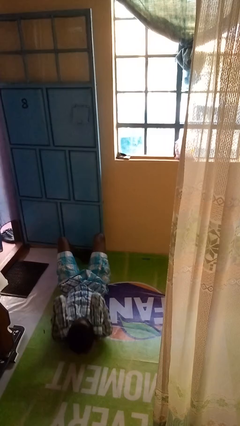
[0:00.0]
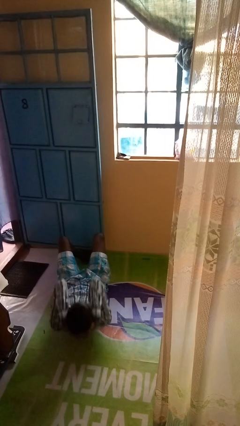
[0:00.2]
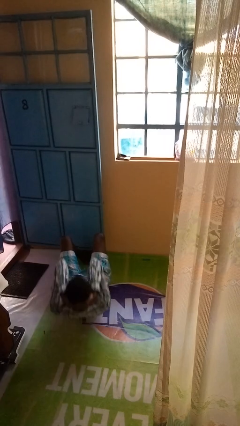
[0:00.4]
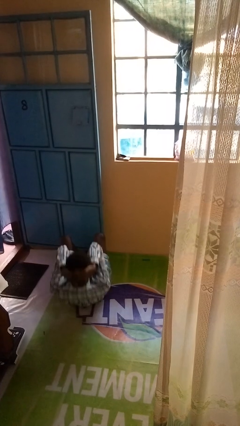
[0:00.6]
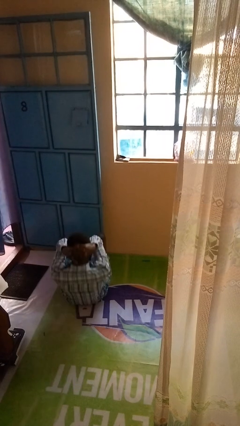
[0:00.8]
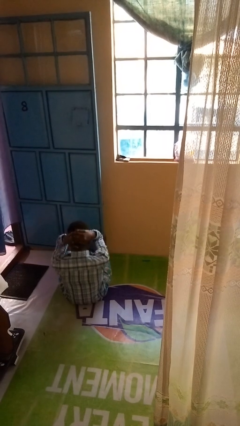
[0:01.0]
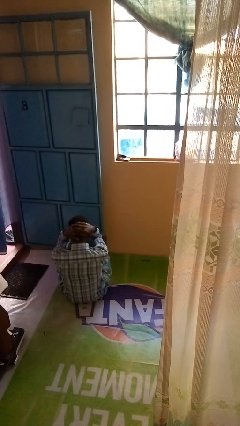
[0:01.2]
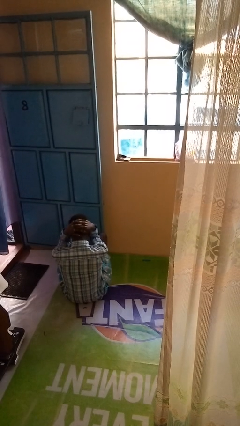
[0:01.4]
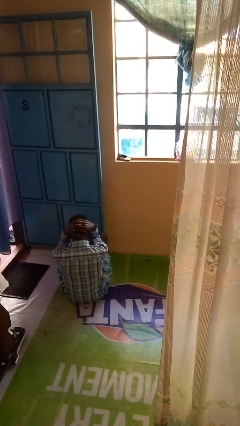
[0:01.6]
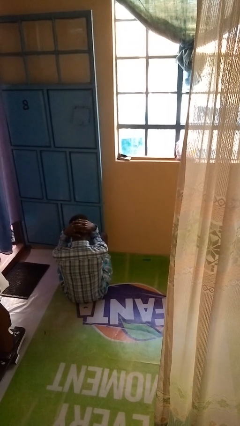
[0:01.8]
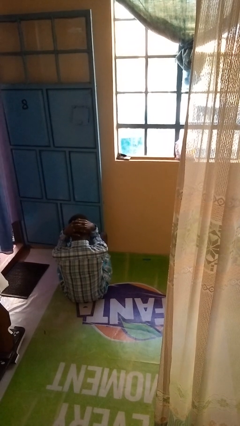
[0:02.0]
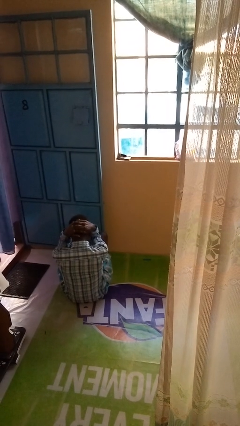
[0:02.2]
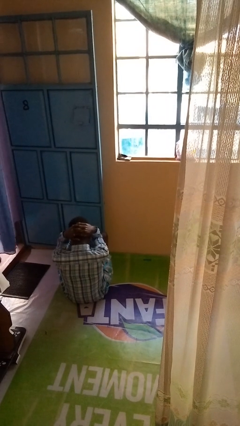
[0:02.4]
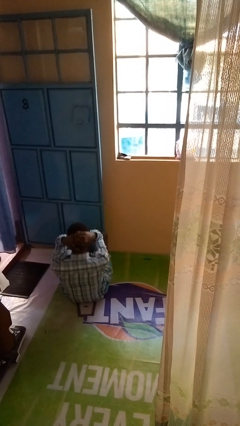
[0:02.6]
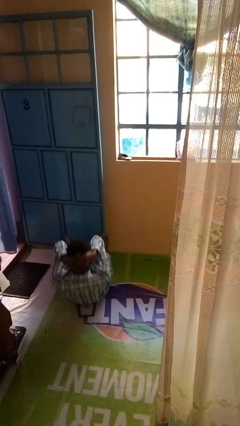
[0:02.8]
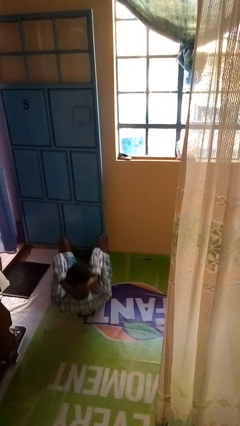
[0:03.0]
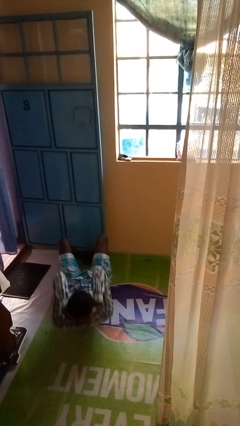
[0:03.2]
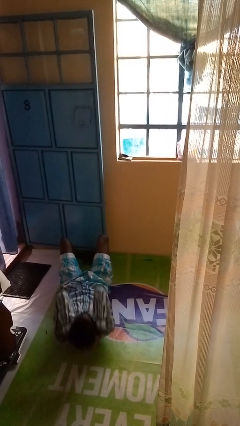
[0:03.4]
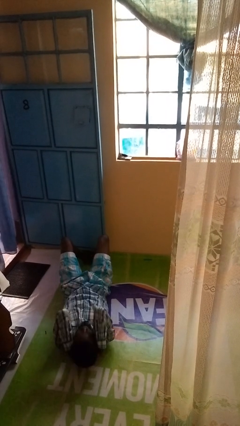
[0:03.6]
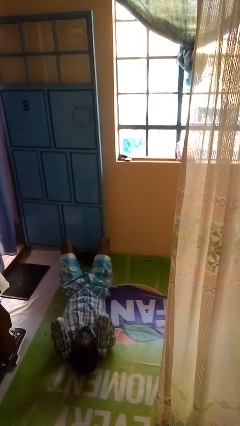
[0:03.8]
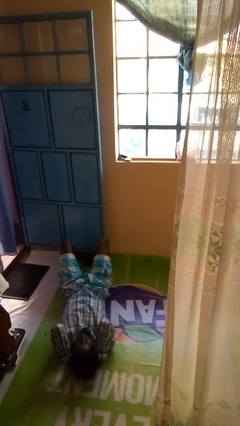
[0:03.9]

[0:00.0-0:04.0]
person exercises with situp

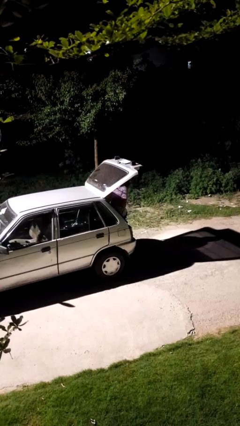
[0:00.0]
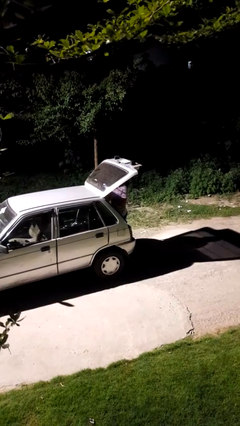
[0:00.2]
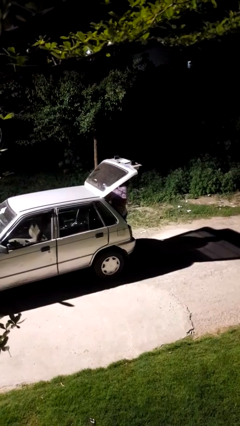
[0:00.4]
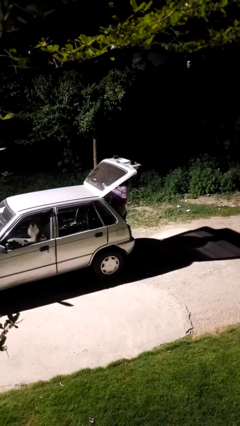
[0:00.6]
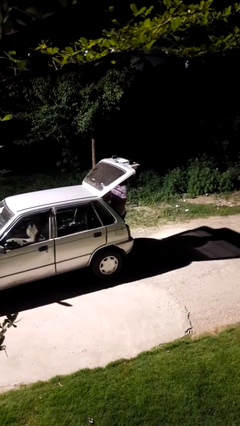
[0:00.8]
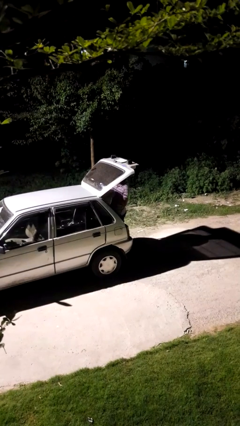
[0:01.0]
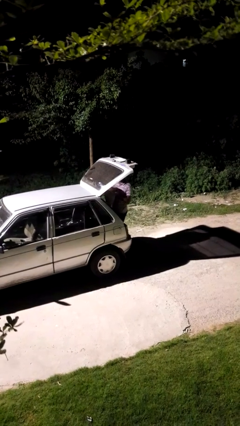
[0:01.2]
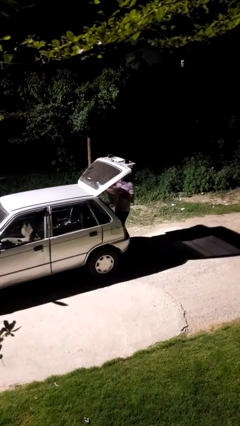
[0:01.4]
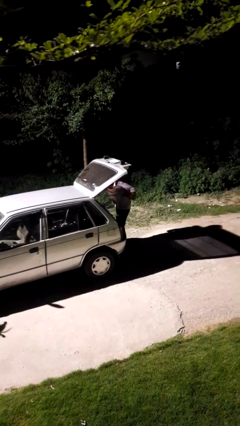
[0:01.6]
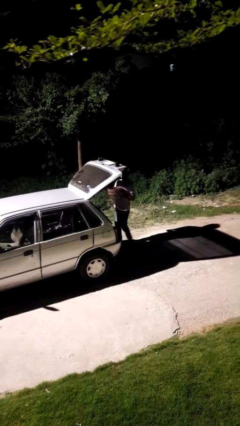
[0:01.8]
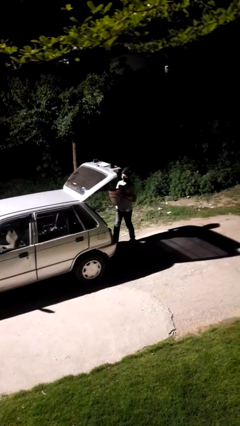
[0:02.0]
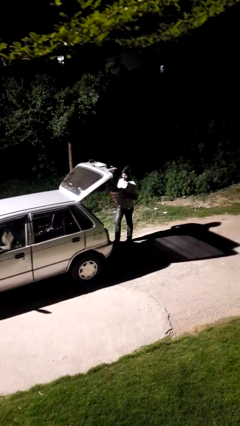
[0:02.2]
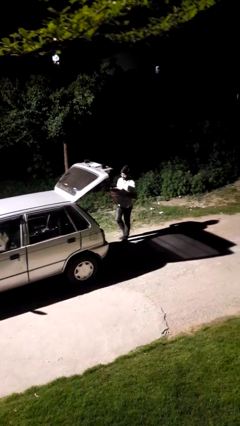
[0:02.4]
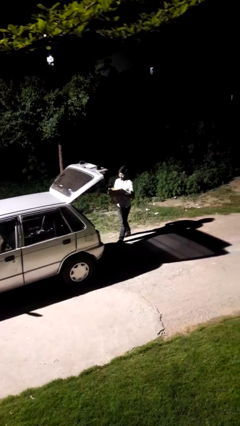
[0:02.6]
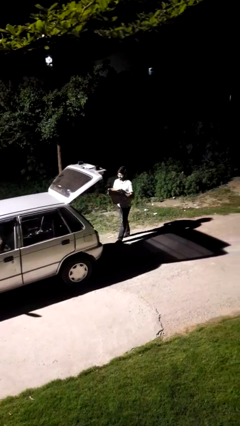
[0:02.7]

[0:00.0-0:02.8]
person unloads car

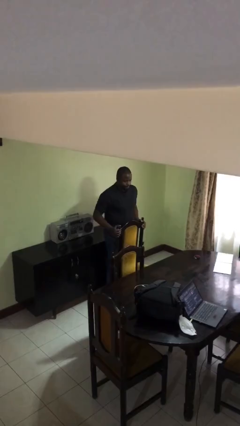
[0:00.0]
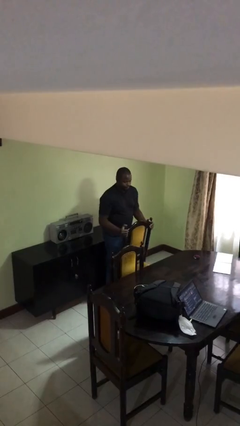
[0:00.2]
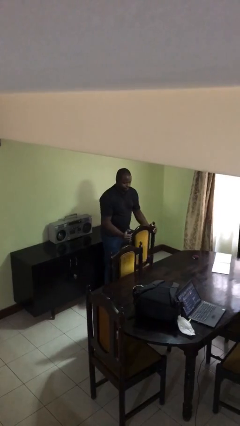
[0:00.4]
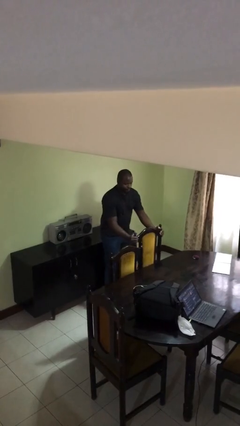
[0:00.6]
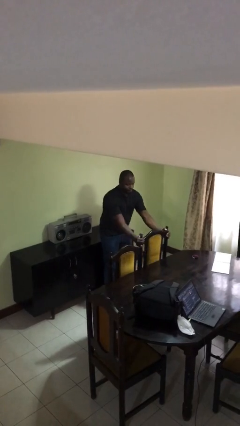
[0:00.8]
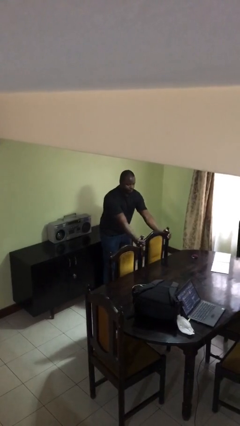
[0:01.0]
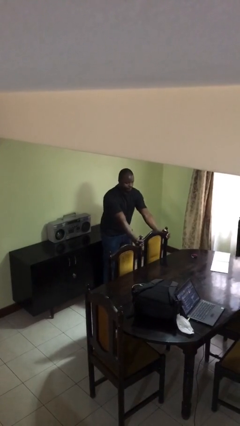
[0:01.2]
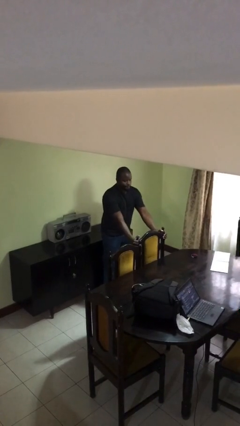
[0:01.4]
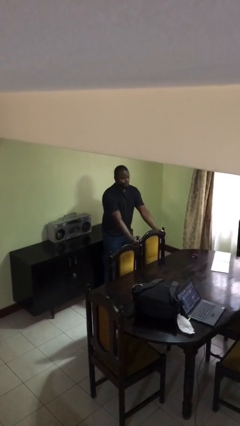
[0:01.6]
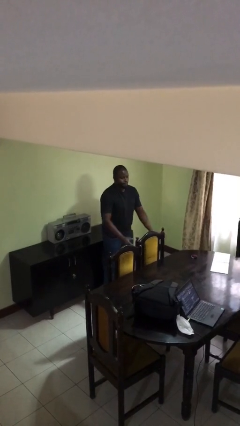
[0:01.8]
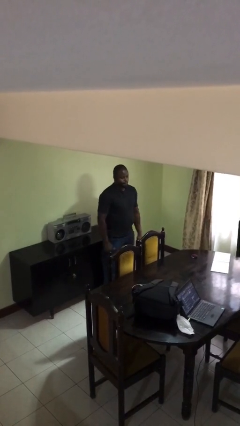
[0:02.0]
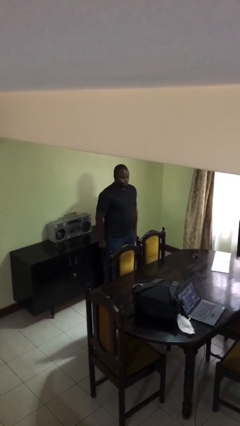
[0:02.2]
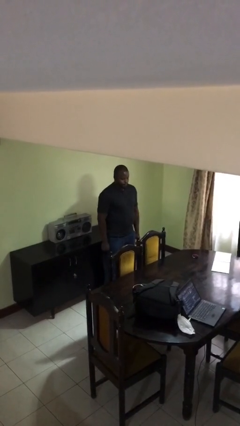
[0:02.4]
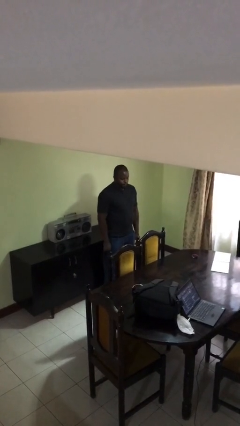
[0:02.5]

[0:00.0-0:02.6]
person pushes in chair

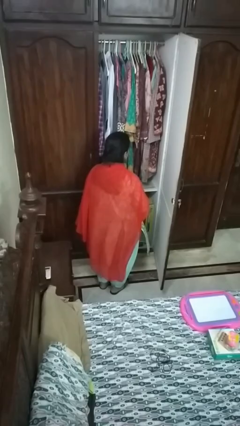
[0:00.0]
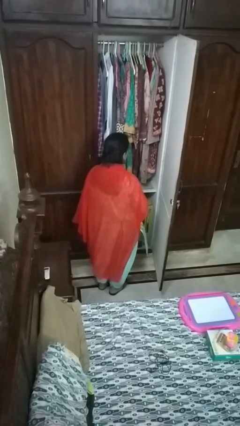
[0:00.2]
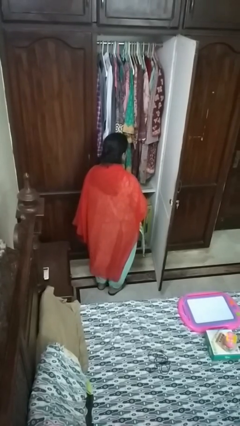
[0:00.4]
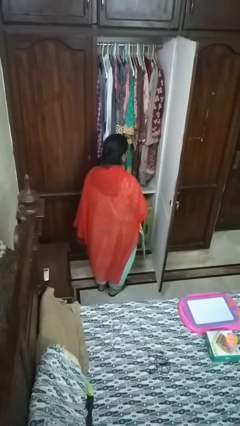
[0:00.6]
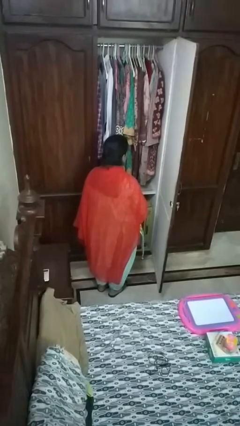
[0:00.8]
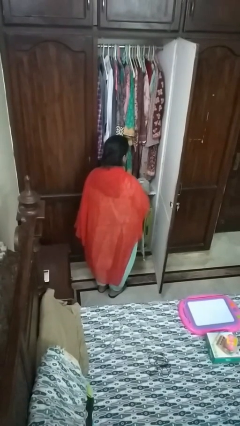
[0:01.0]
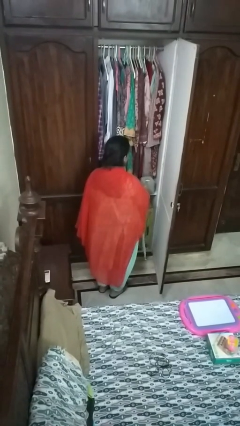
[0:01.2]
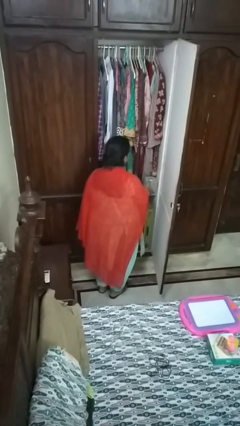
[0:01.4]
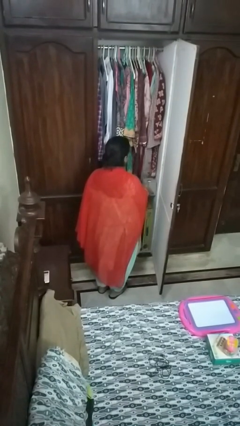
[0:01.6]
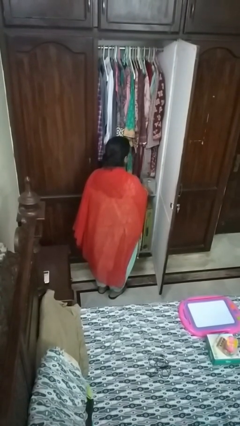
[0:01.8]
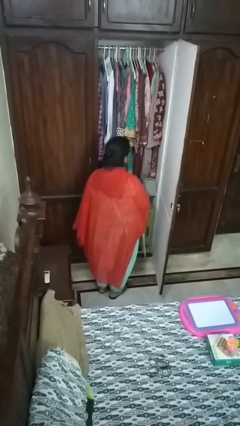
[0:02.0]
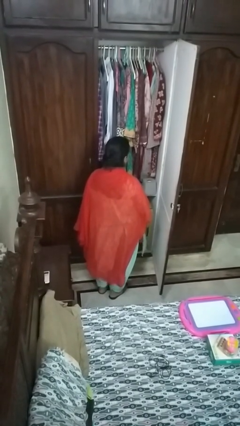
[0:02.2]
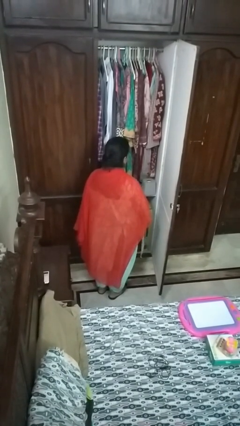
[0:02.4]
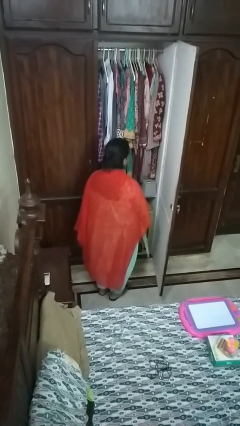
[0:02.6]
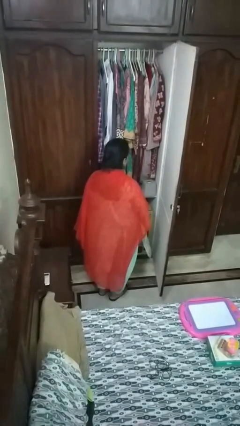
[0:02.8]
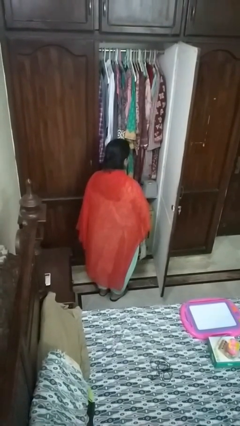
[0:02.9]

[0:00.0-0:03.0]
person puts down object into cabinet

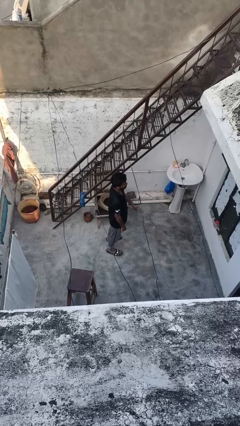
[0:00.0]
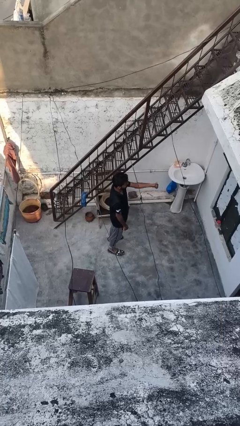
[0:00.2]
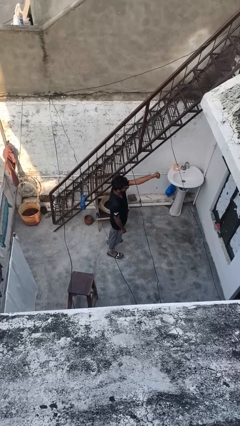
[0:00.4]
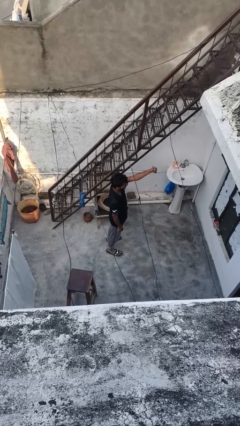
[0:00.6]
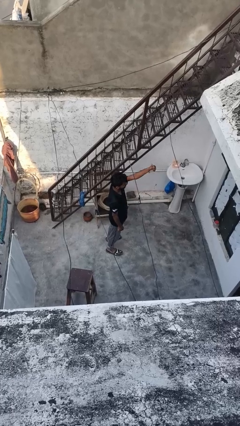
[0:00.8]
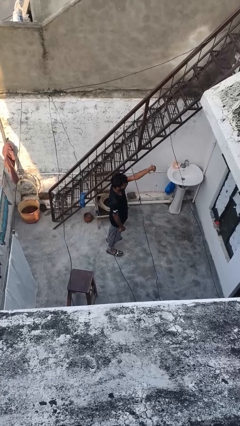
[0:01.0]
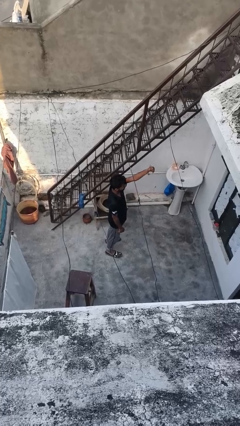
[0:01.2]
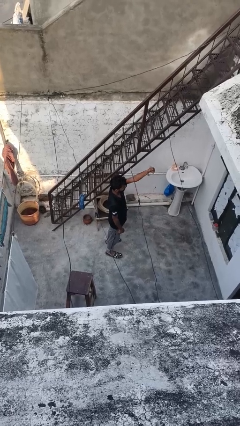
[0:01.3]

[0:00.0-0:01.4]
person gestures thumbs up

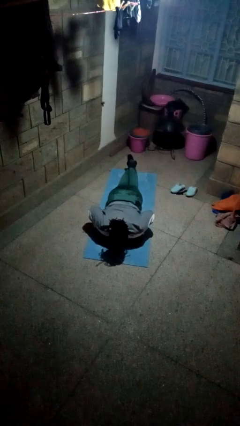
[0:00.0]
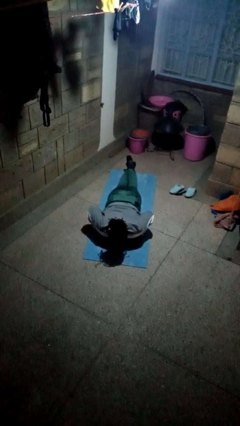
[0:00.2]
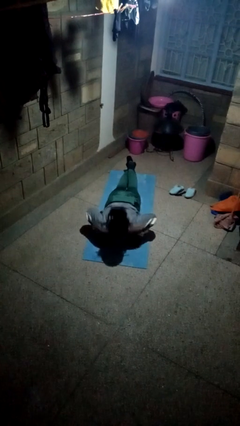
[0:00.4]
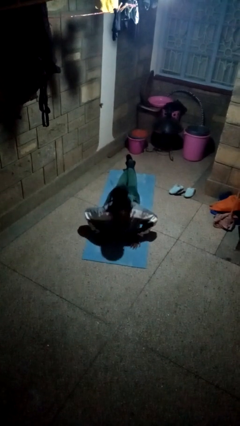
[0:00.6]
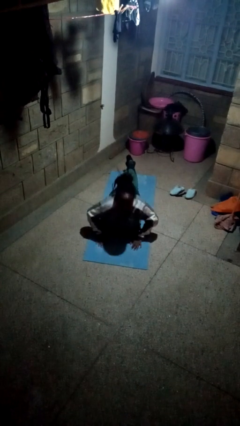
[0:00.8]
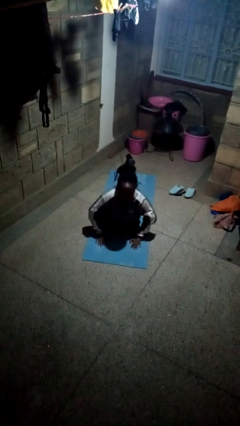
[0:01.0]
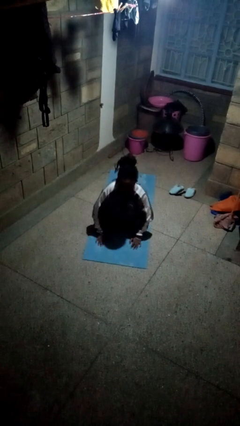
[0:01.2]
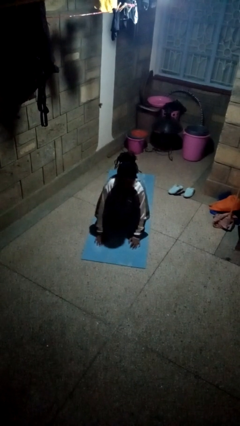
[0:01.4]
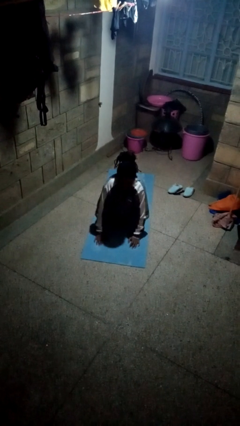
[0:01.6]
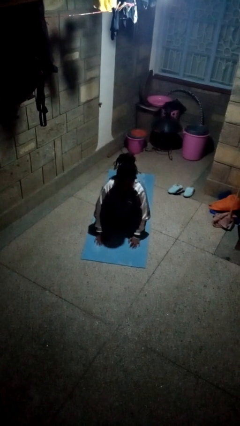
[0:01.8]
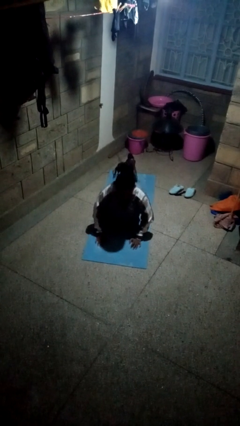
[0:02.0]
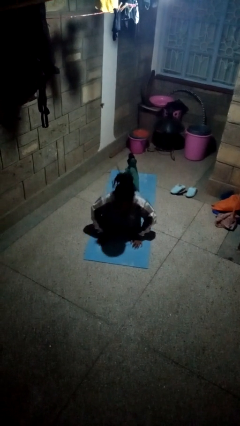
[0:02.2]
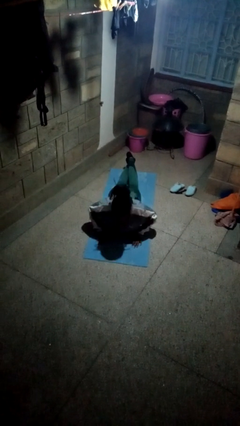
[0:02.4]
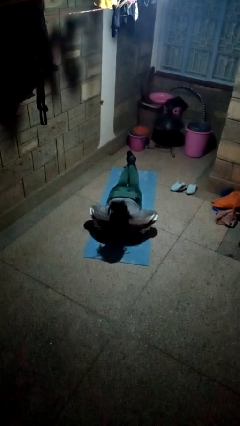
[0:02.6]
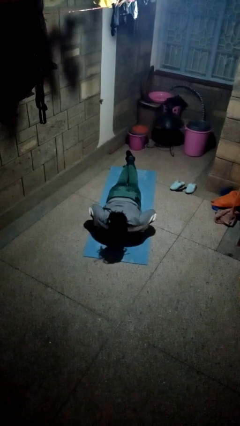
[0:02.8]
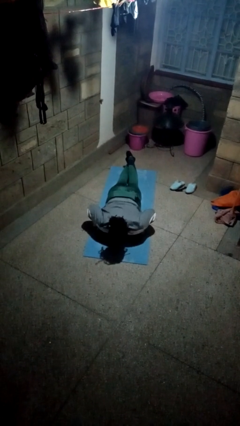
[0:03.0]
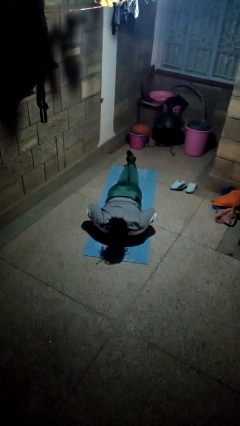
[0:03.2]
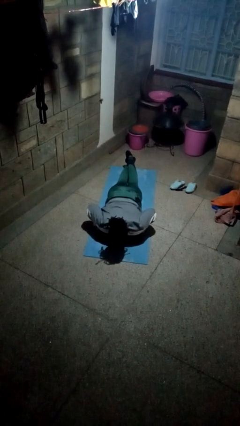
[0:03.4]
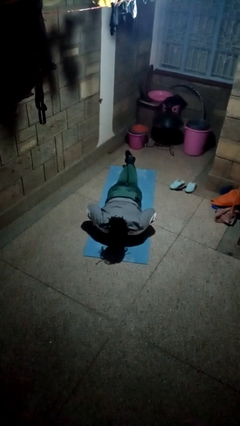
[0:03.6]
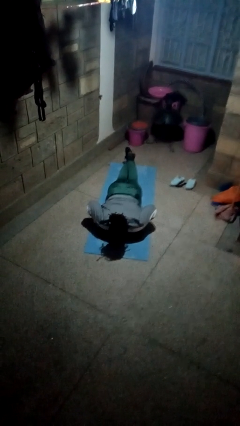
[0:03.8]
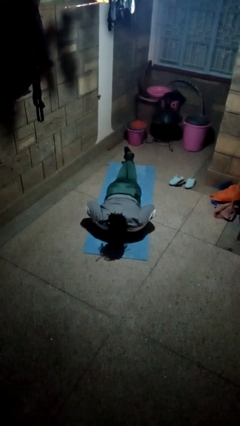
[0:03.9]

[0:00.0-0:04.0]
person exercises with pushup
